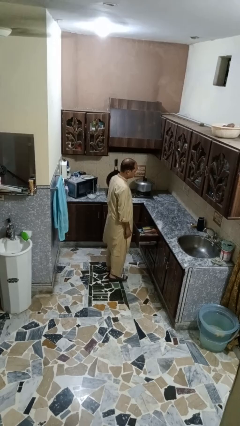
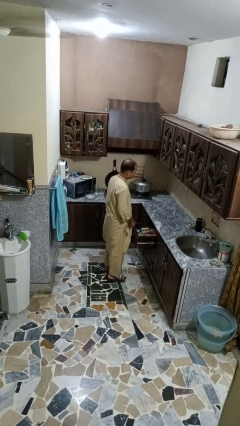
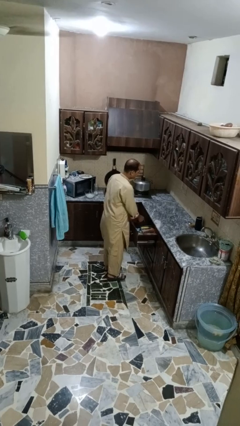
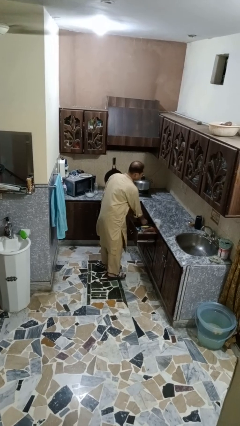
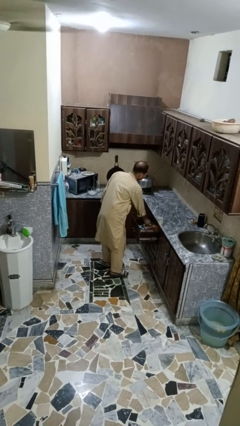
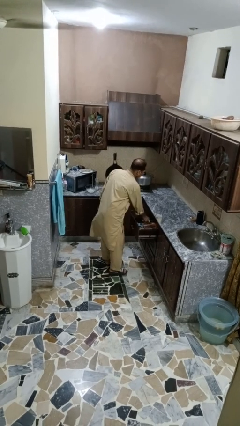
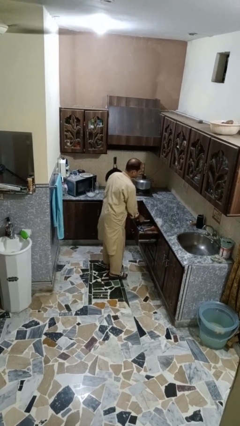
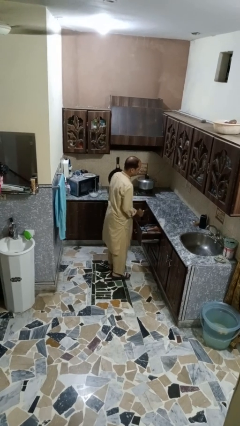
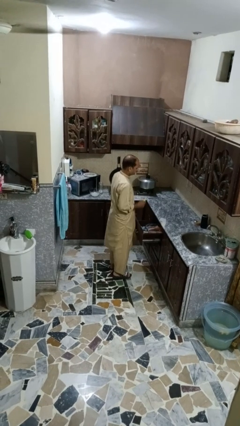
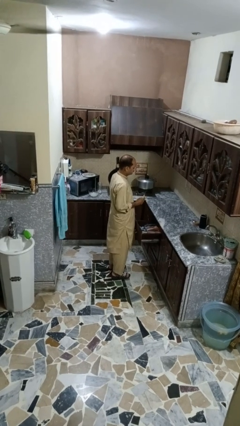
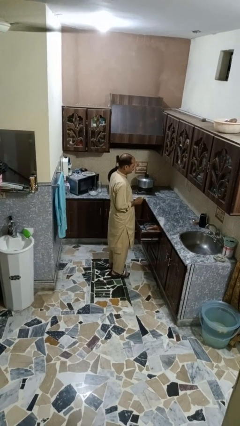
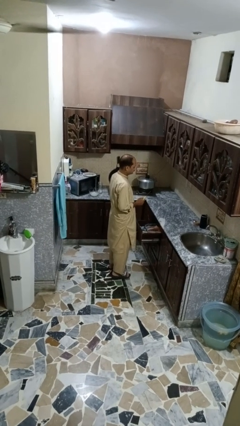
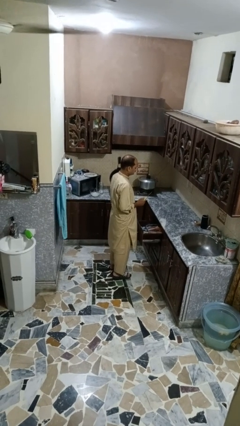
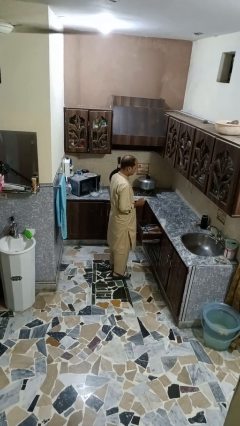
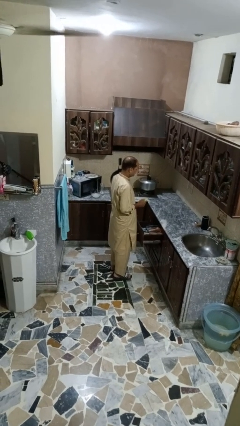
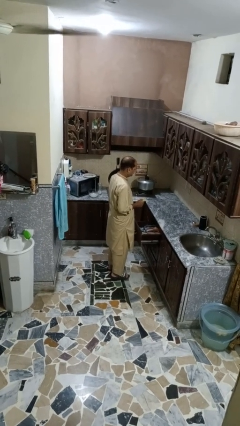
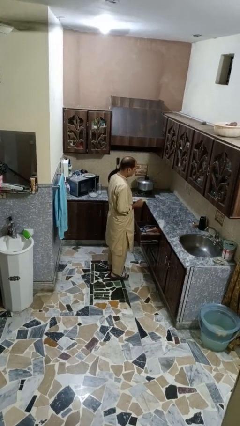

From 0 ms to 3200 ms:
person takes object from kitchen drawer

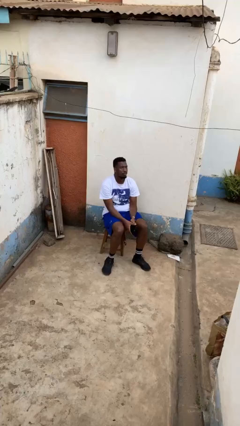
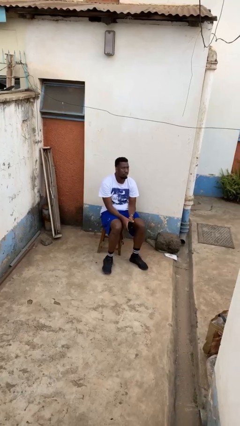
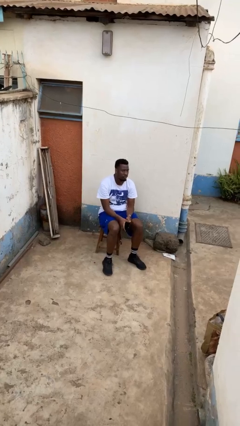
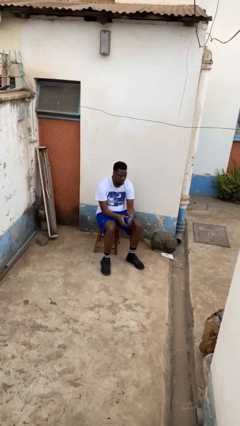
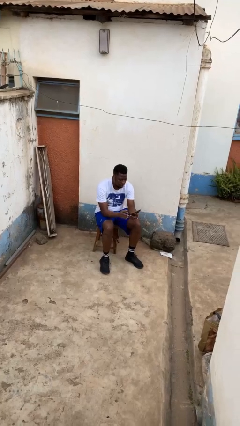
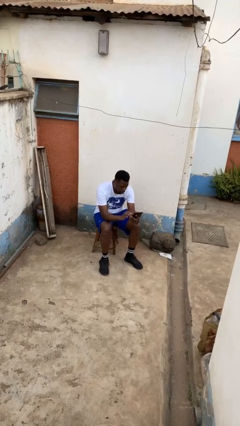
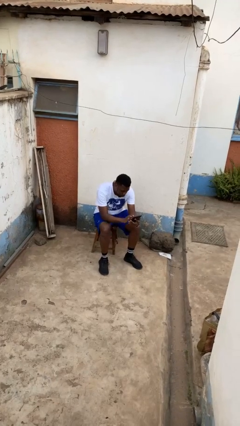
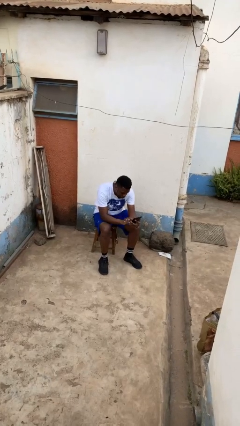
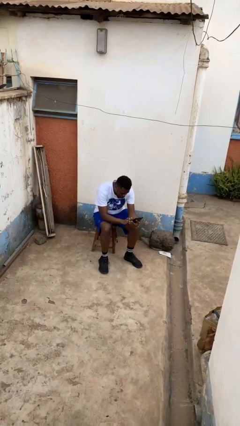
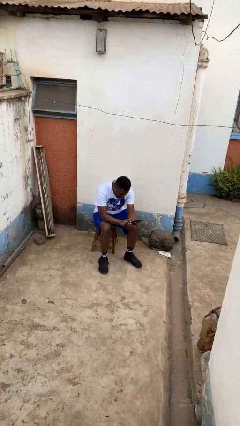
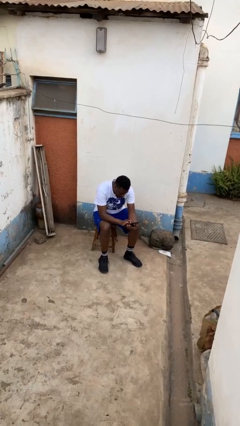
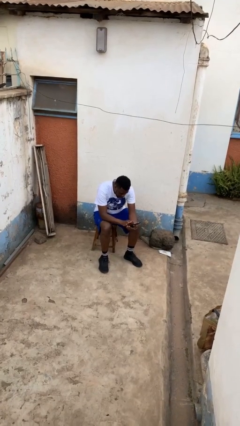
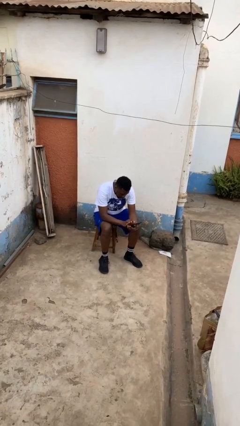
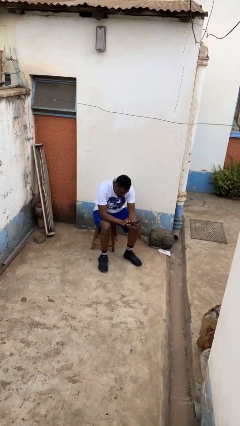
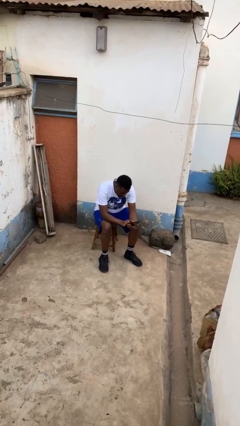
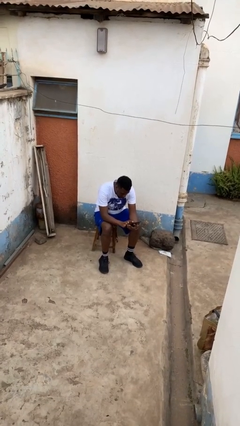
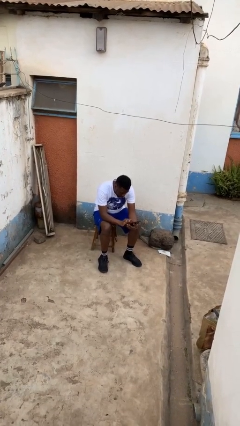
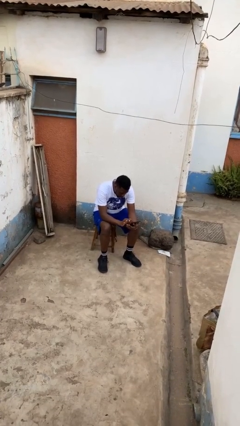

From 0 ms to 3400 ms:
person interacts with tablet

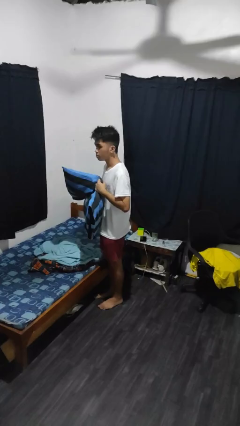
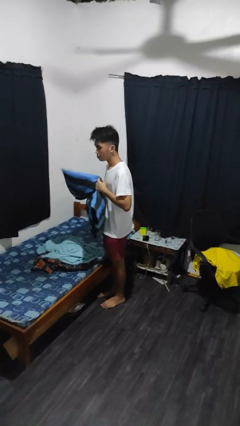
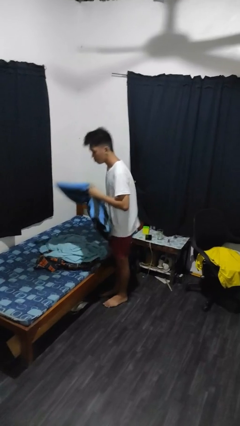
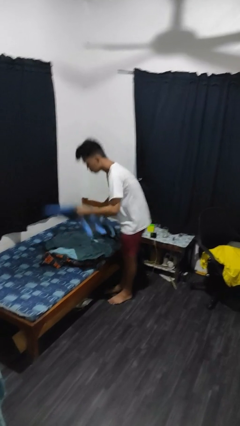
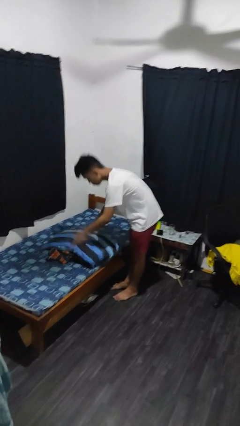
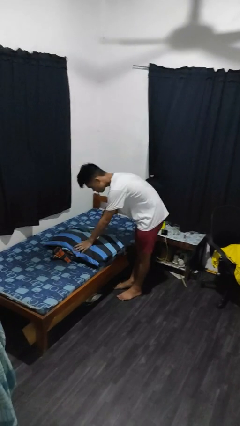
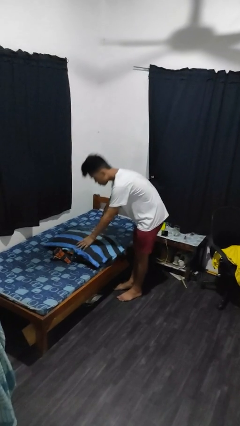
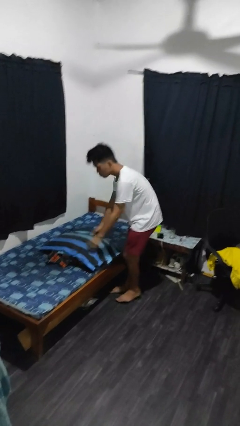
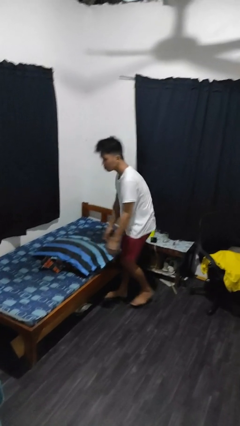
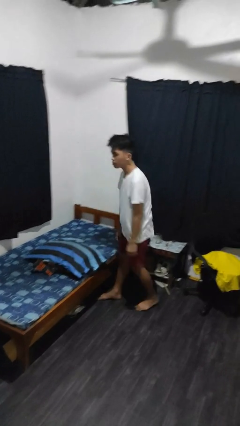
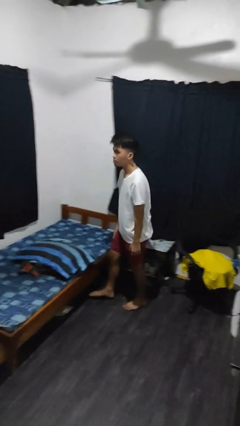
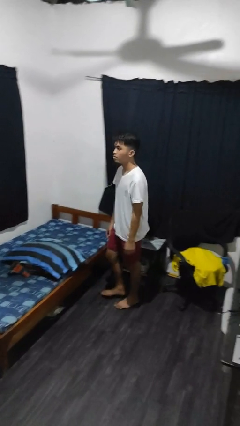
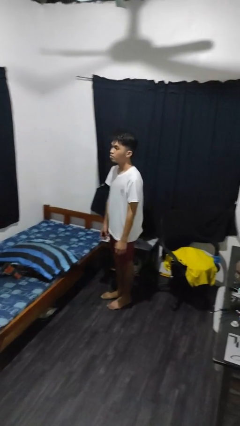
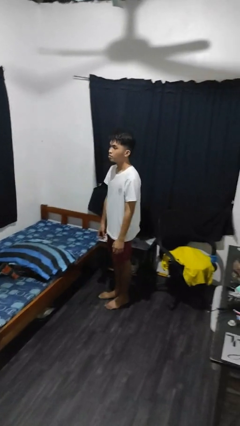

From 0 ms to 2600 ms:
person puts down object on bed

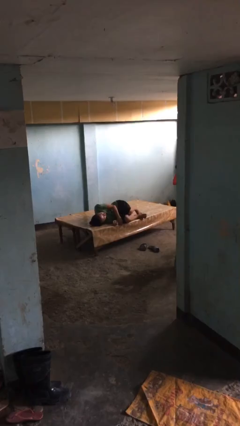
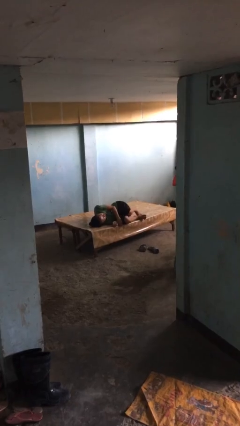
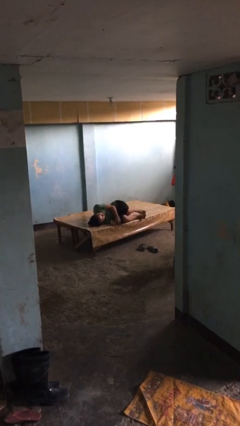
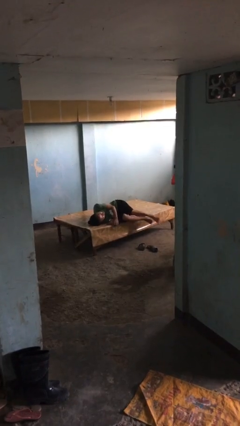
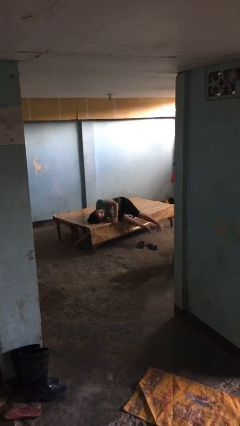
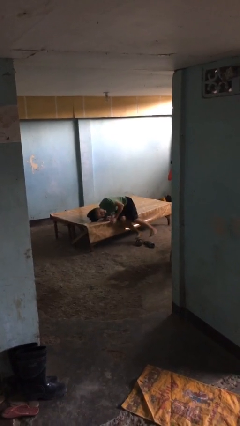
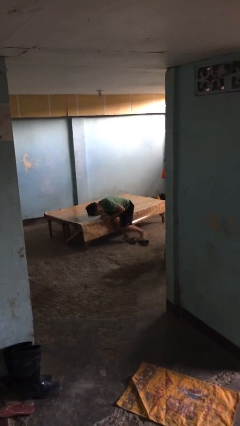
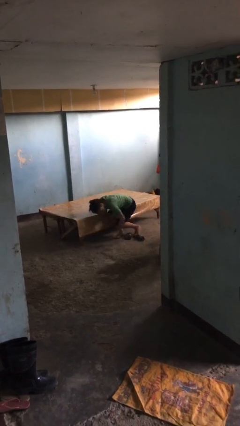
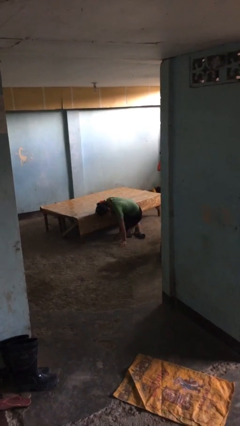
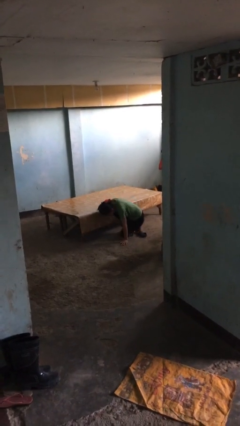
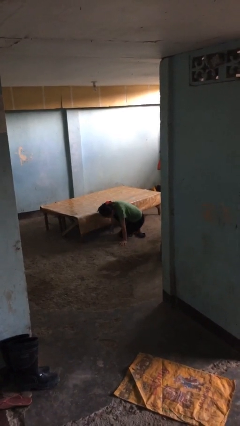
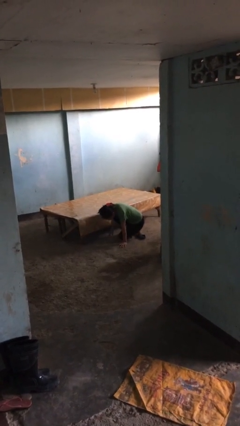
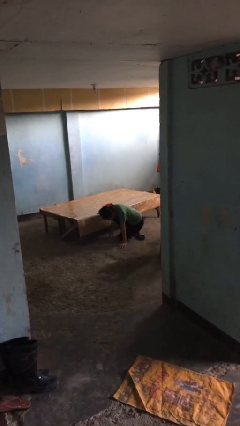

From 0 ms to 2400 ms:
person falls from bed

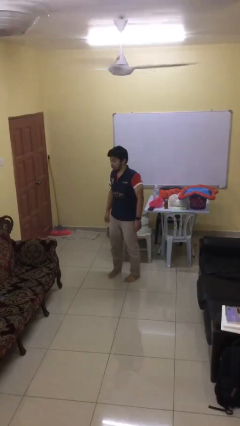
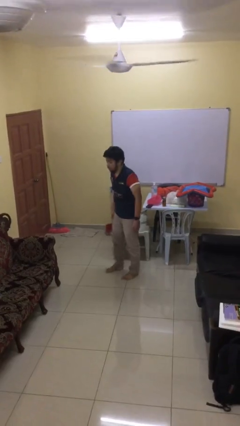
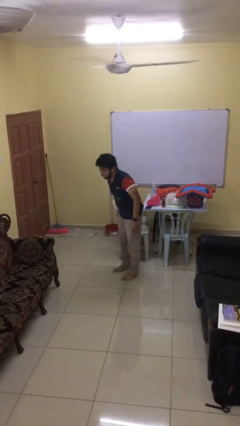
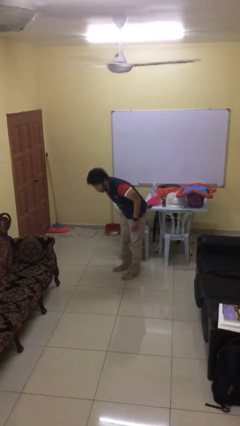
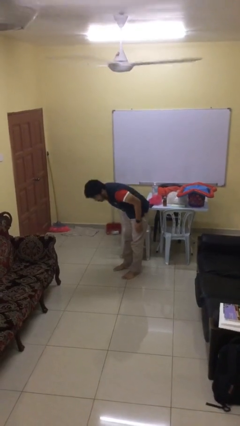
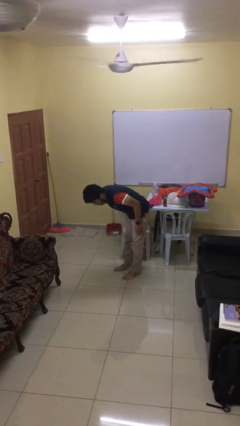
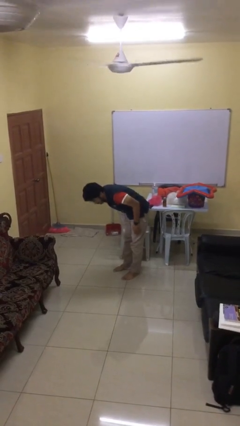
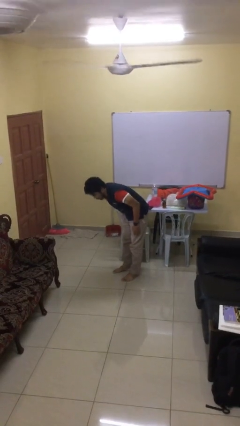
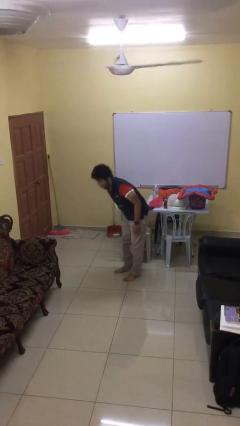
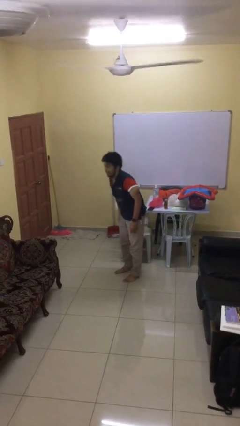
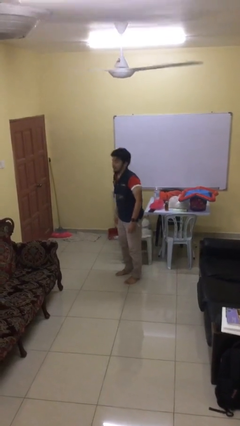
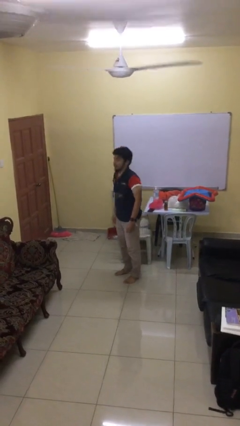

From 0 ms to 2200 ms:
person bows

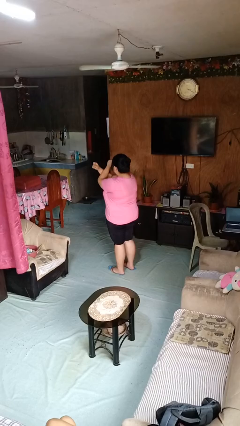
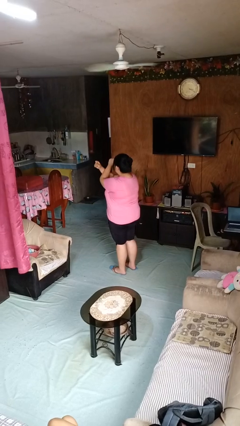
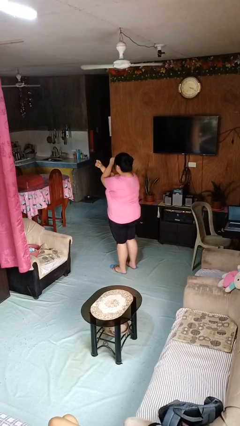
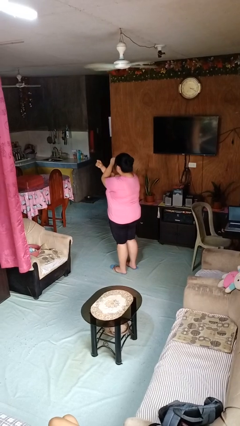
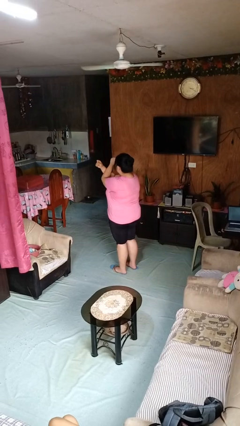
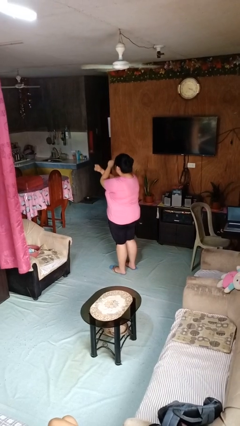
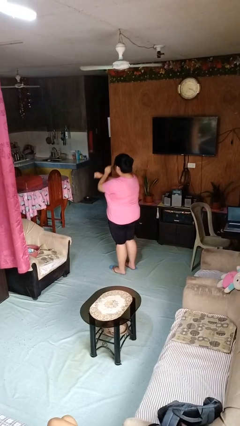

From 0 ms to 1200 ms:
person gestures arms x

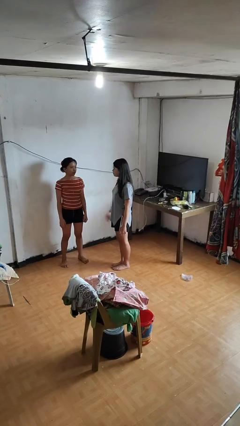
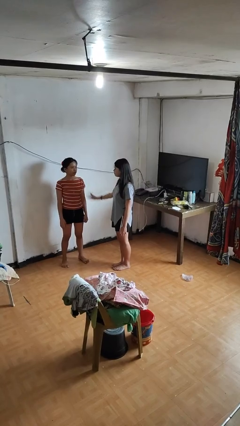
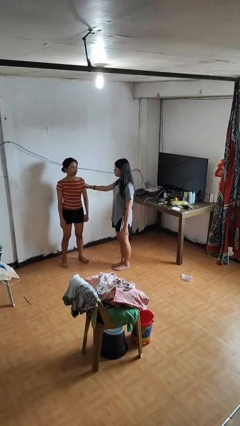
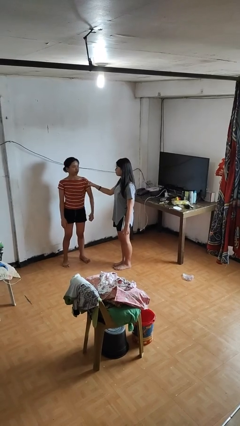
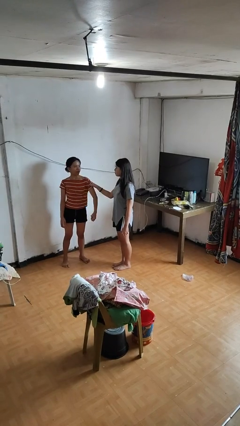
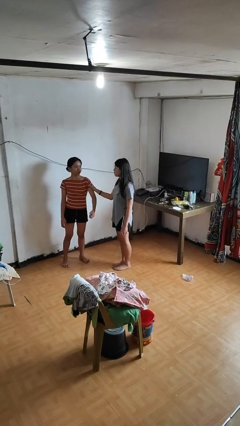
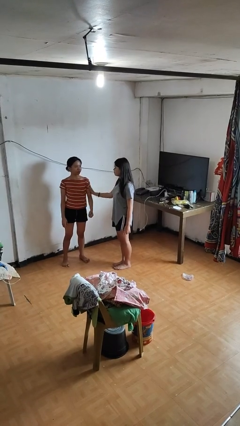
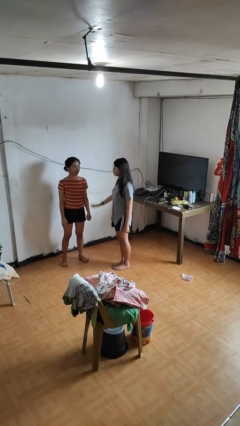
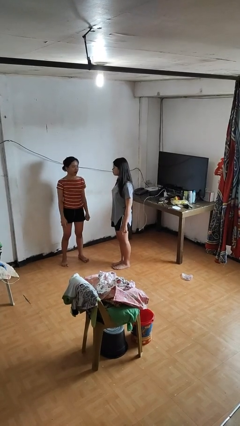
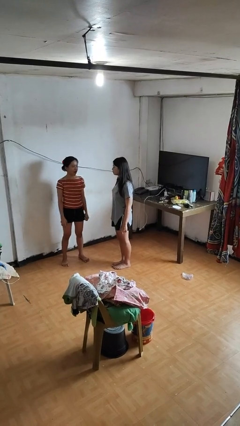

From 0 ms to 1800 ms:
person grabs person by bicep
